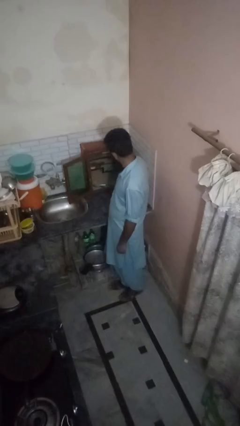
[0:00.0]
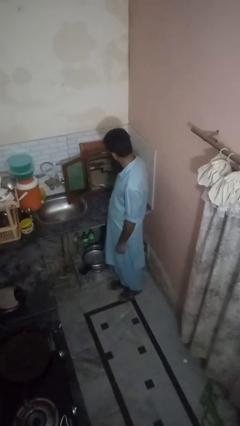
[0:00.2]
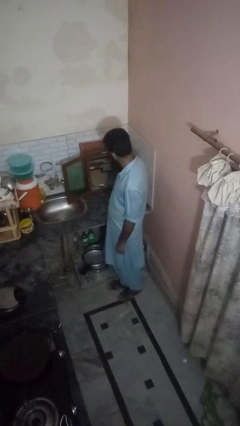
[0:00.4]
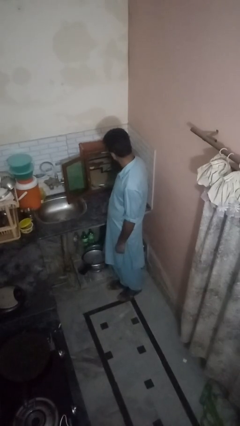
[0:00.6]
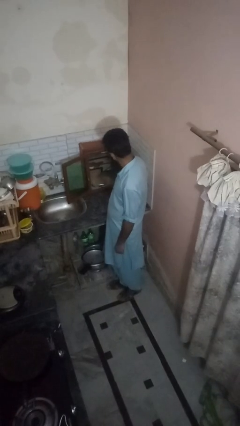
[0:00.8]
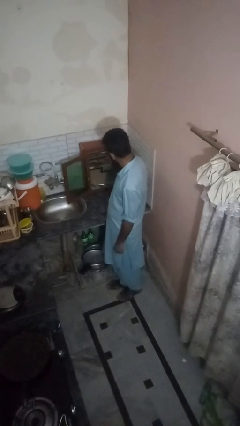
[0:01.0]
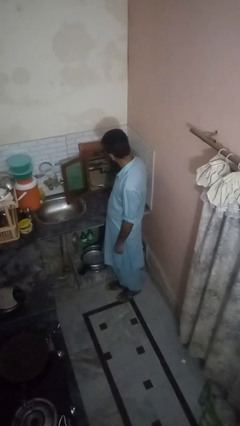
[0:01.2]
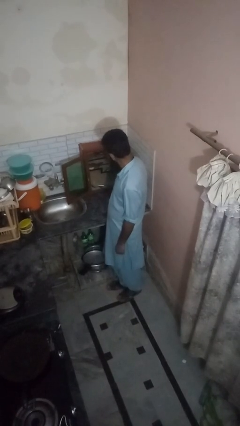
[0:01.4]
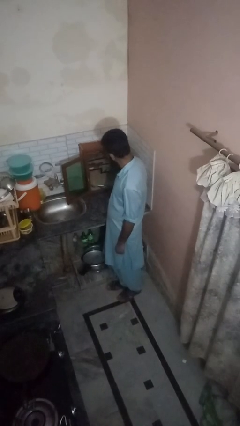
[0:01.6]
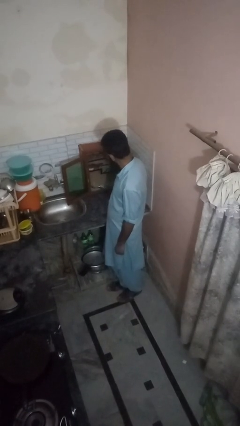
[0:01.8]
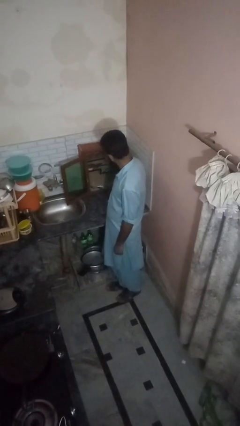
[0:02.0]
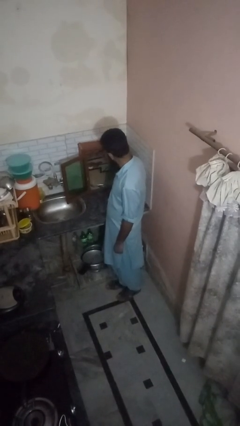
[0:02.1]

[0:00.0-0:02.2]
person puts object into kitchen drawer

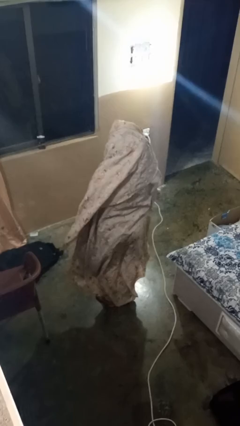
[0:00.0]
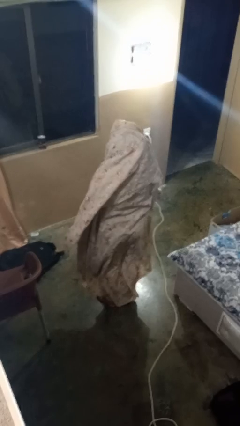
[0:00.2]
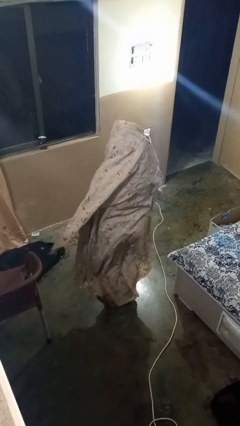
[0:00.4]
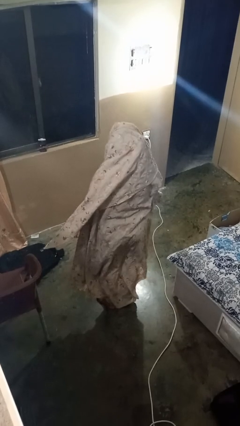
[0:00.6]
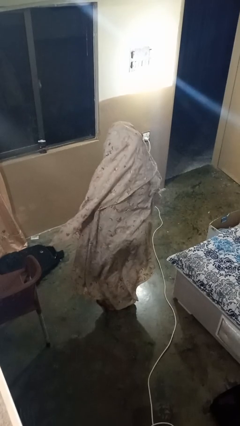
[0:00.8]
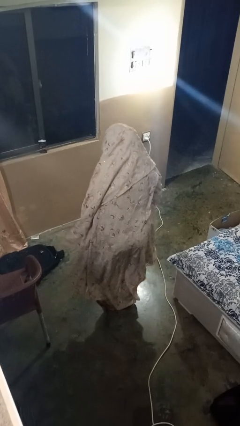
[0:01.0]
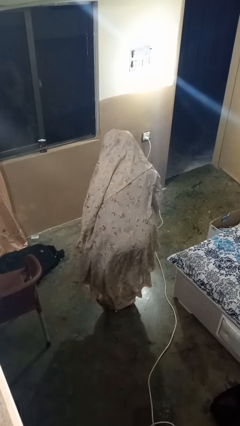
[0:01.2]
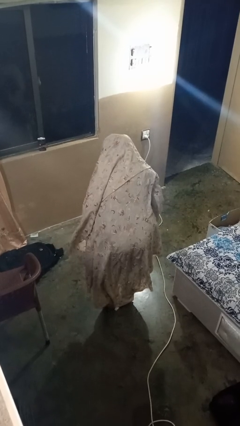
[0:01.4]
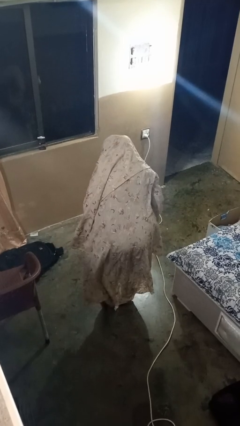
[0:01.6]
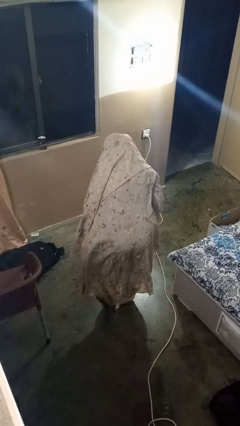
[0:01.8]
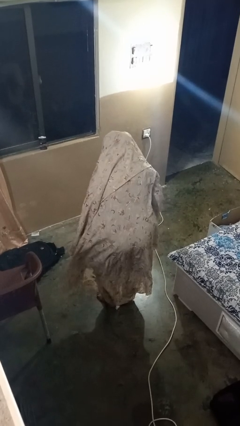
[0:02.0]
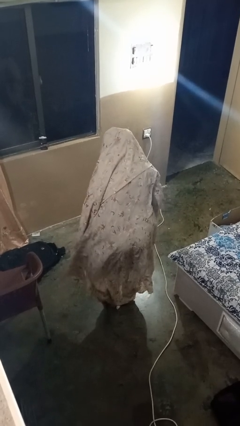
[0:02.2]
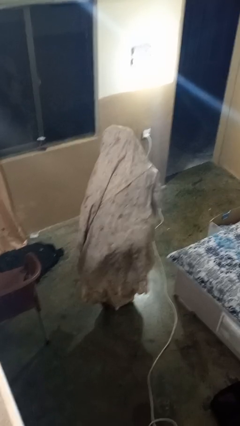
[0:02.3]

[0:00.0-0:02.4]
person bows

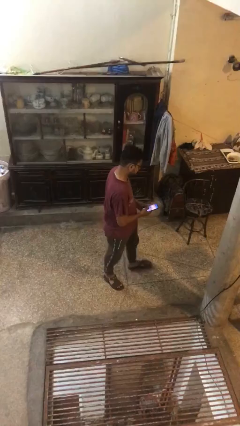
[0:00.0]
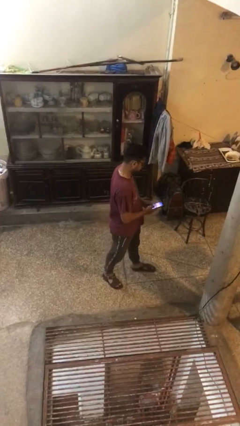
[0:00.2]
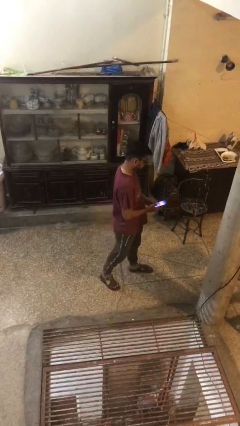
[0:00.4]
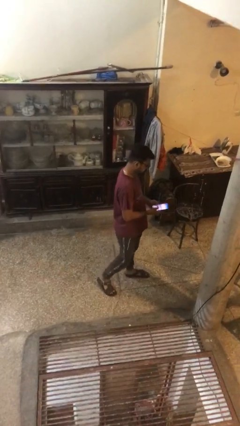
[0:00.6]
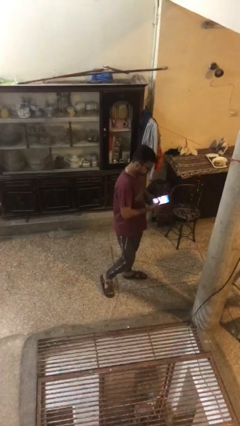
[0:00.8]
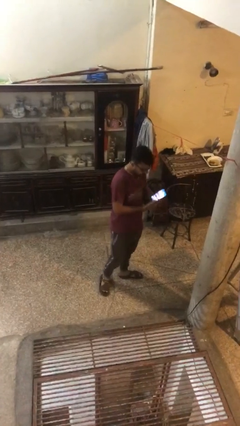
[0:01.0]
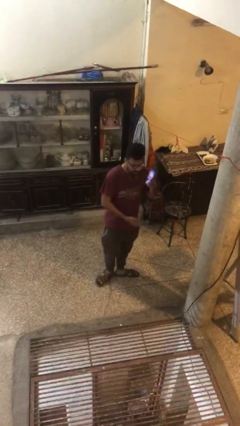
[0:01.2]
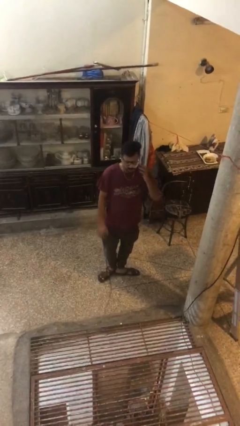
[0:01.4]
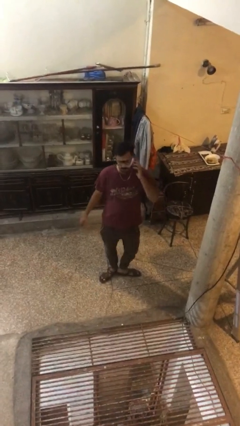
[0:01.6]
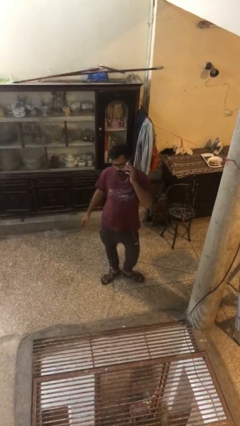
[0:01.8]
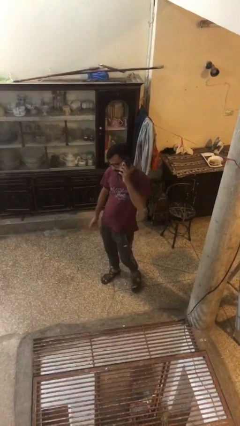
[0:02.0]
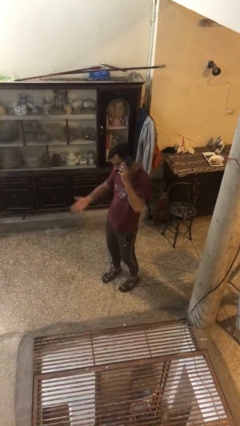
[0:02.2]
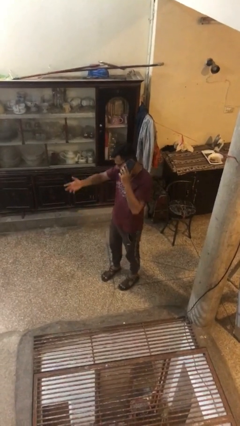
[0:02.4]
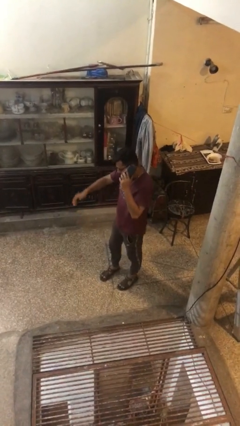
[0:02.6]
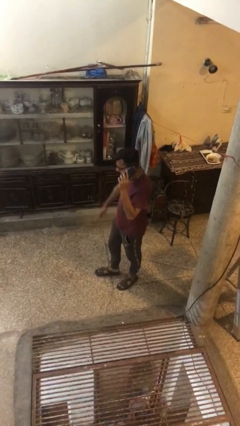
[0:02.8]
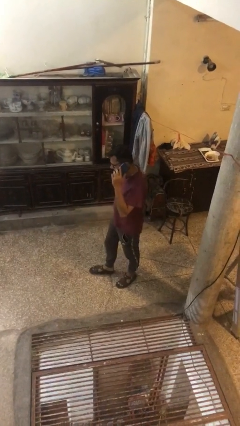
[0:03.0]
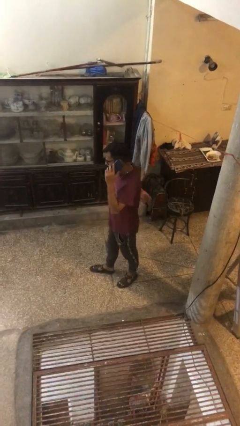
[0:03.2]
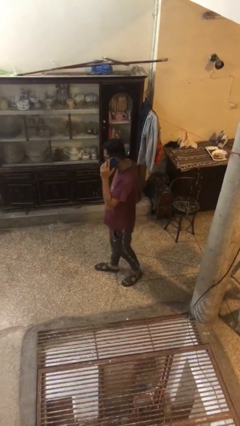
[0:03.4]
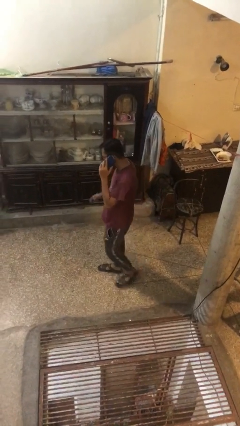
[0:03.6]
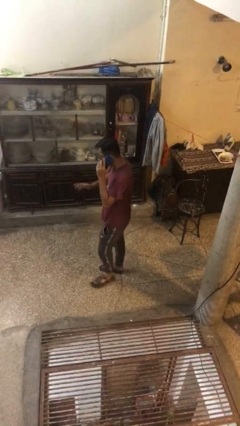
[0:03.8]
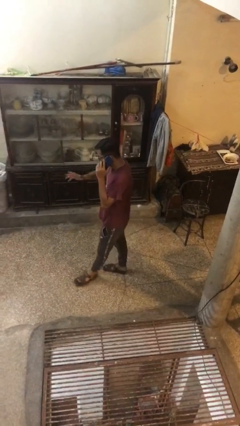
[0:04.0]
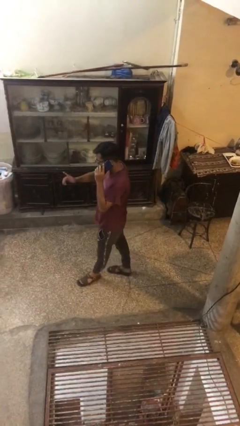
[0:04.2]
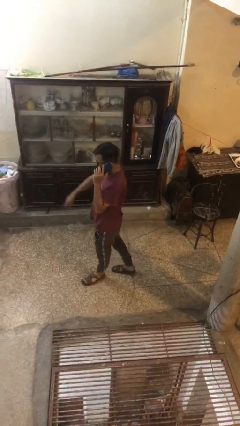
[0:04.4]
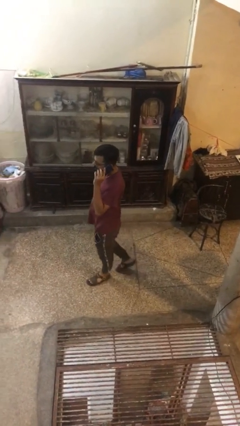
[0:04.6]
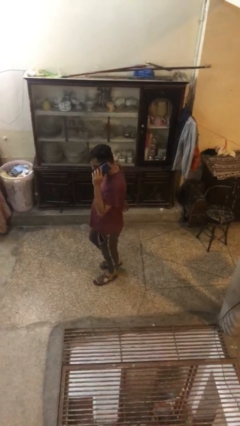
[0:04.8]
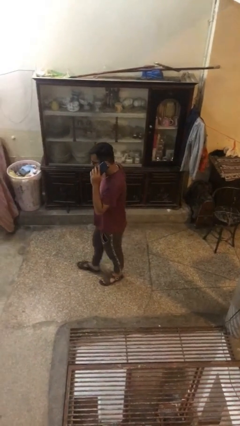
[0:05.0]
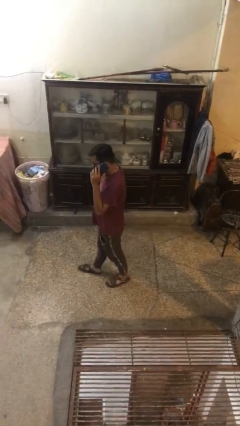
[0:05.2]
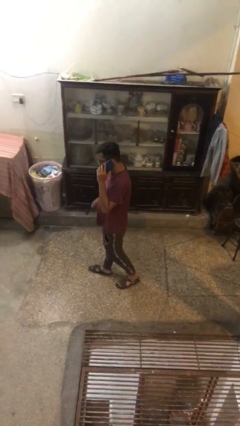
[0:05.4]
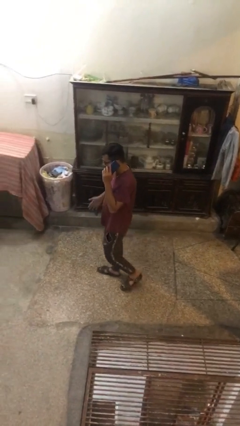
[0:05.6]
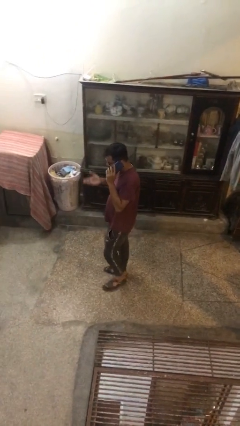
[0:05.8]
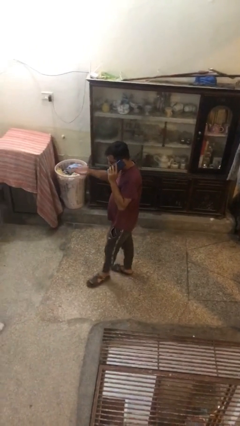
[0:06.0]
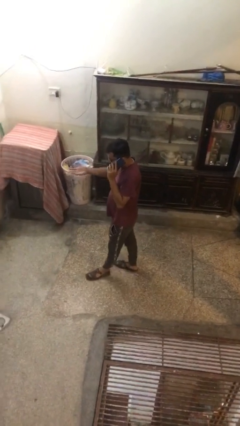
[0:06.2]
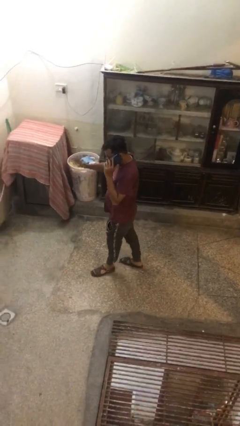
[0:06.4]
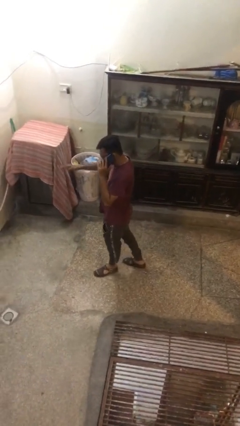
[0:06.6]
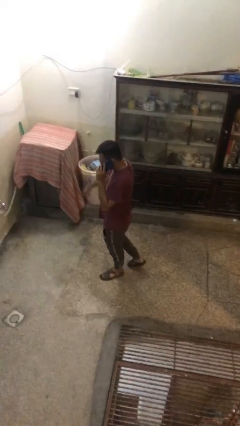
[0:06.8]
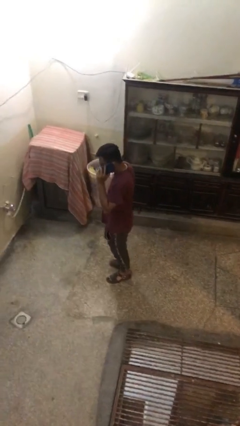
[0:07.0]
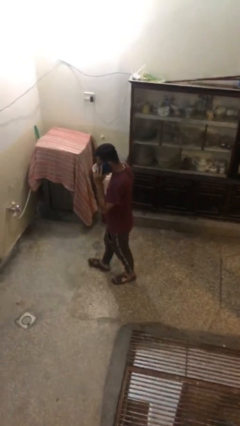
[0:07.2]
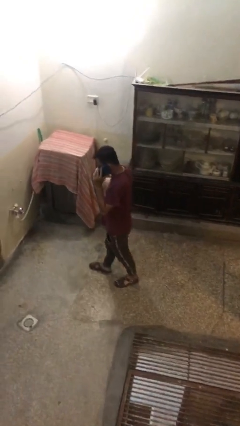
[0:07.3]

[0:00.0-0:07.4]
person talks on phone

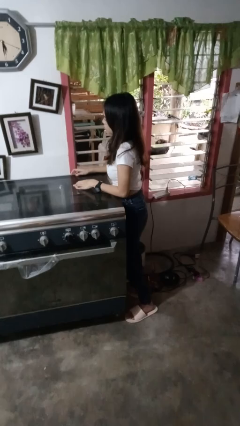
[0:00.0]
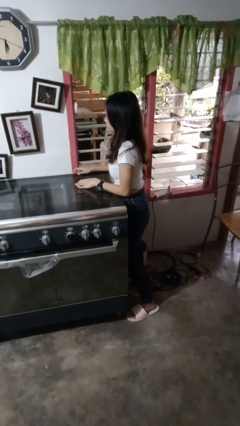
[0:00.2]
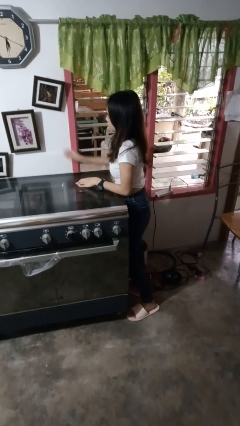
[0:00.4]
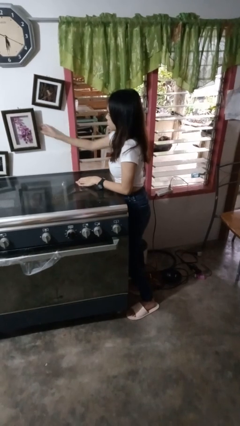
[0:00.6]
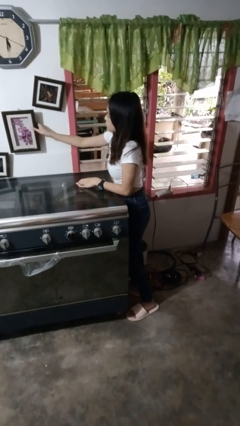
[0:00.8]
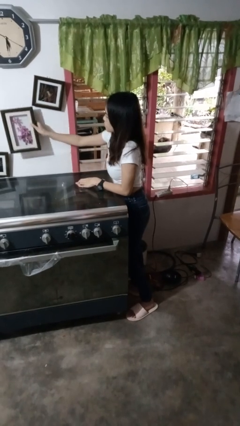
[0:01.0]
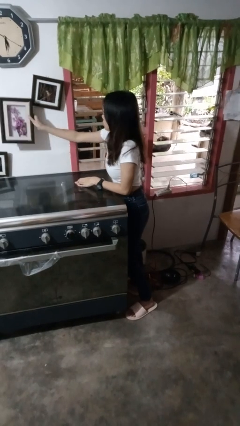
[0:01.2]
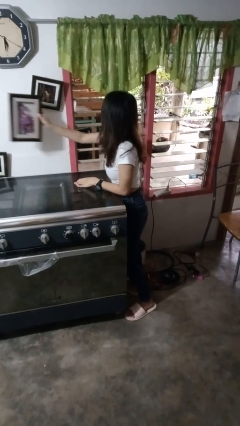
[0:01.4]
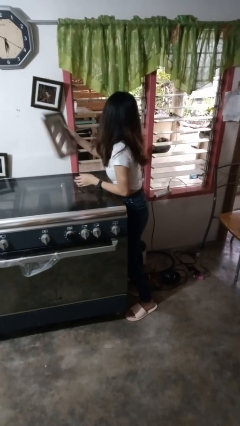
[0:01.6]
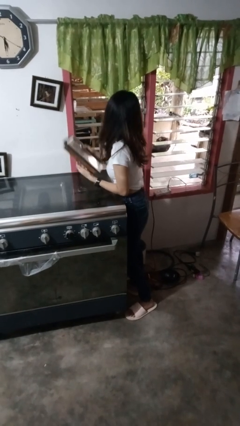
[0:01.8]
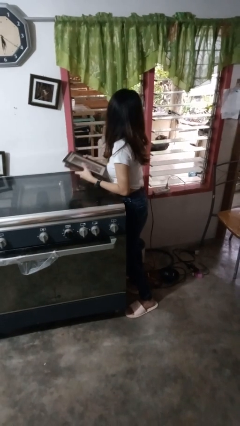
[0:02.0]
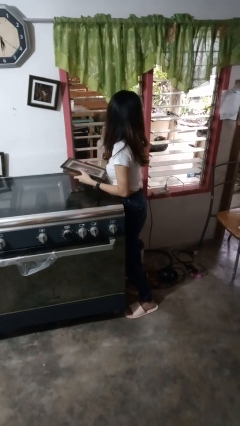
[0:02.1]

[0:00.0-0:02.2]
person takes down picture frame

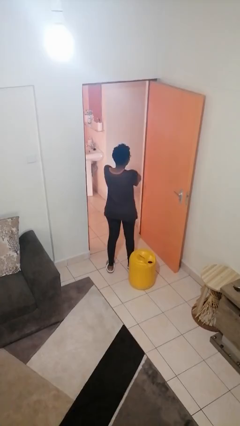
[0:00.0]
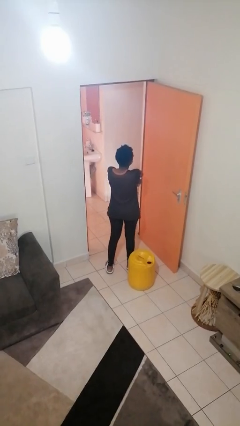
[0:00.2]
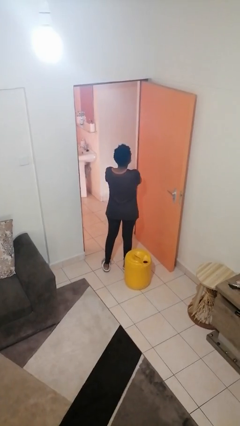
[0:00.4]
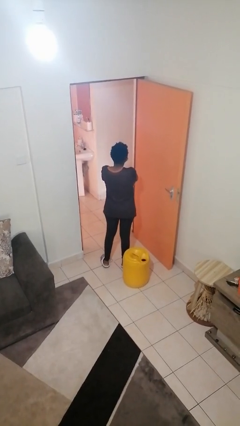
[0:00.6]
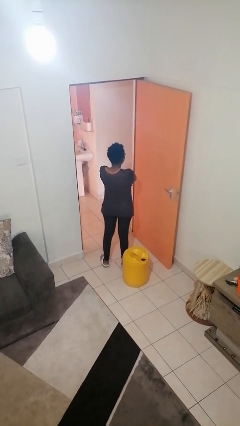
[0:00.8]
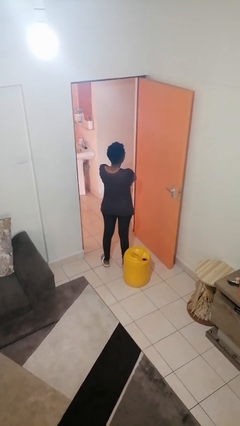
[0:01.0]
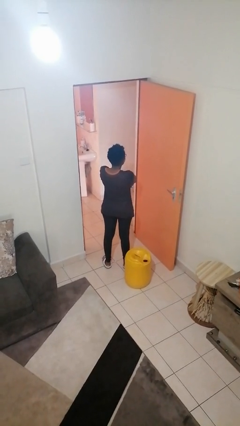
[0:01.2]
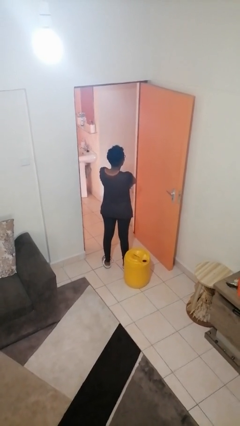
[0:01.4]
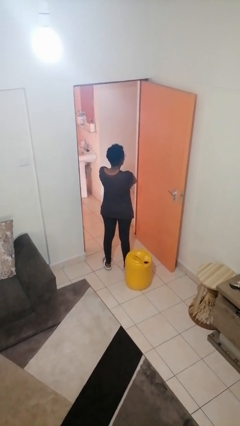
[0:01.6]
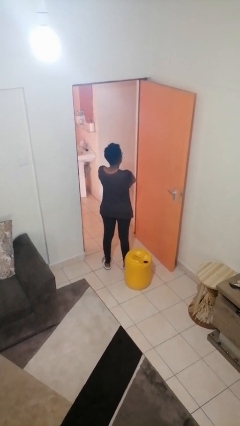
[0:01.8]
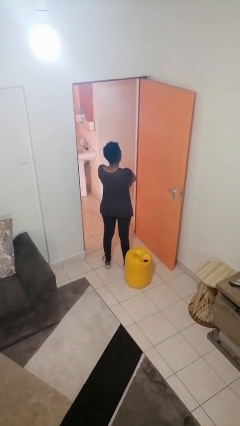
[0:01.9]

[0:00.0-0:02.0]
person crosses arms

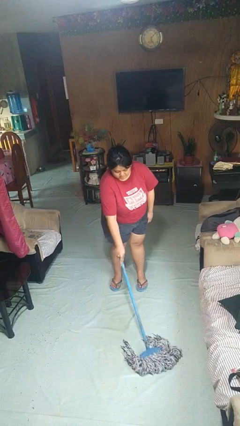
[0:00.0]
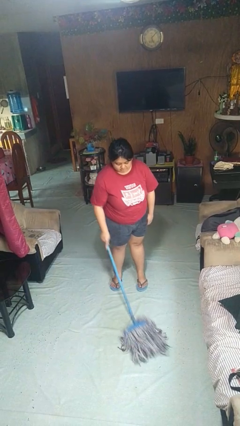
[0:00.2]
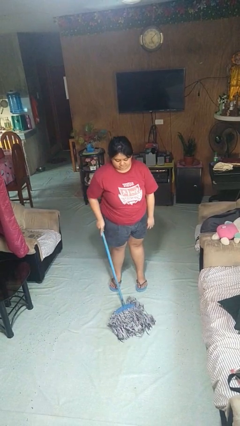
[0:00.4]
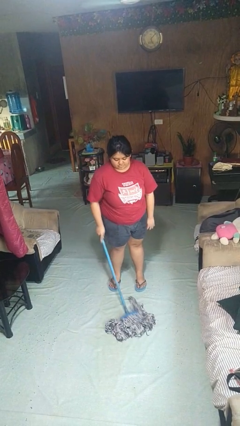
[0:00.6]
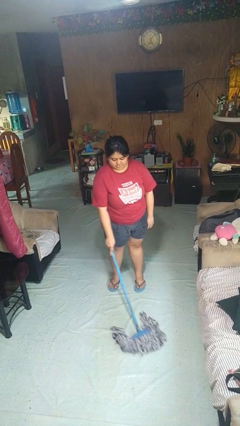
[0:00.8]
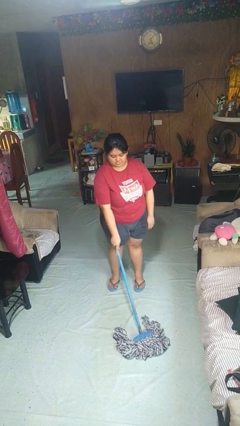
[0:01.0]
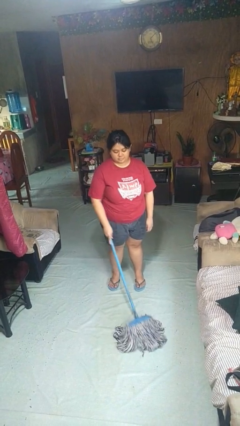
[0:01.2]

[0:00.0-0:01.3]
person mops
